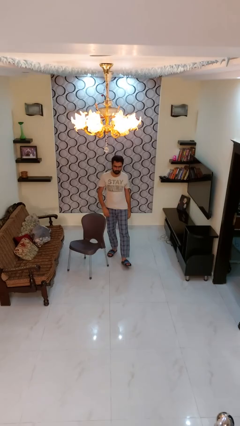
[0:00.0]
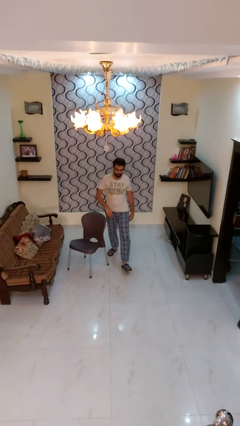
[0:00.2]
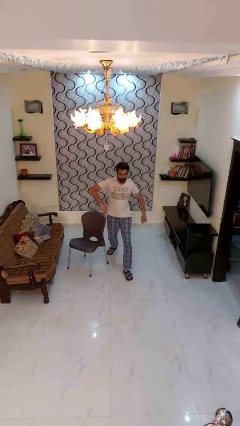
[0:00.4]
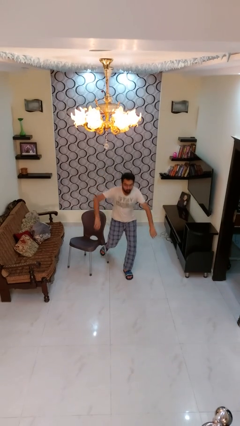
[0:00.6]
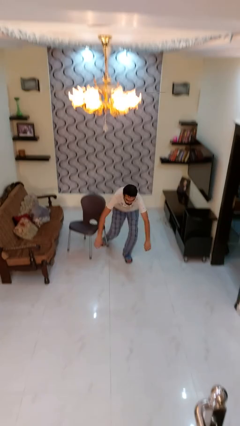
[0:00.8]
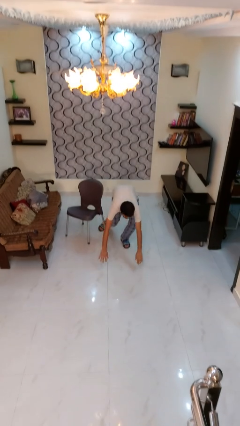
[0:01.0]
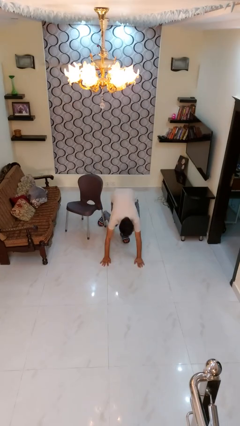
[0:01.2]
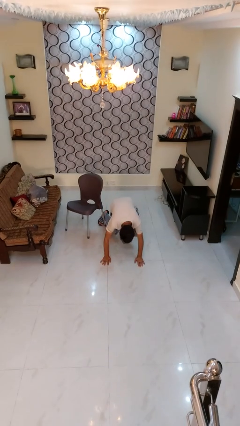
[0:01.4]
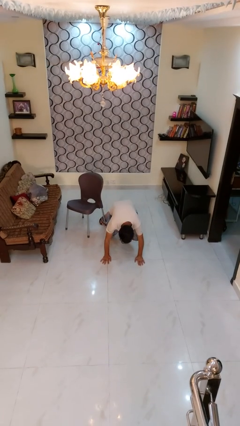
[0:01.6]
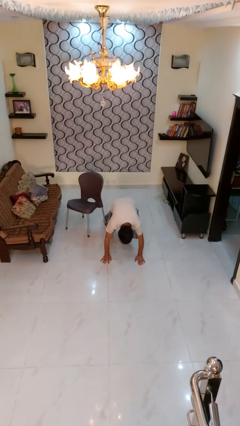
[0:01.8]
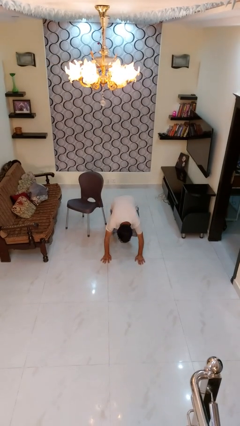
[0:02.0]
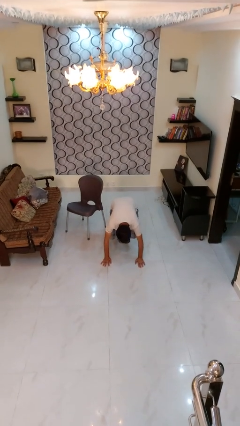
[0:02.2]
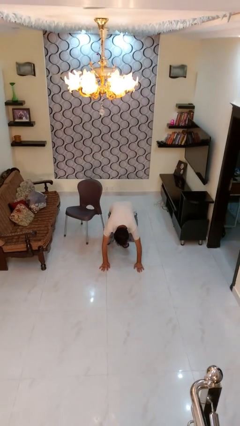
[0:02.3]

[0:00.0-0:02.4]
person trips on object on floor

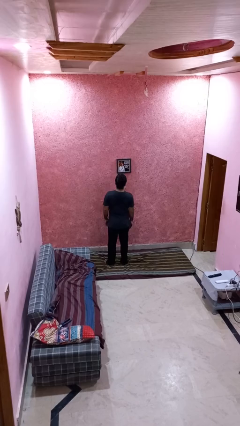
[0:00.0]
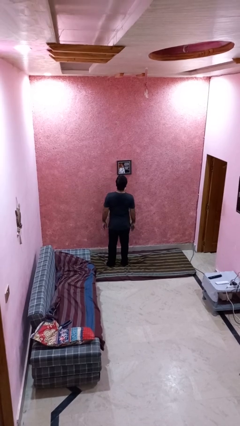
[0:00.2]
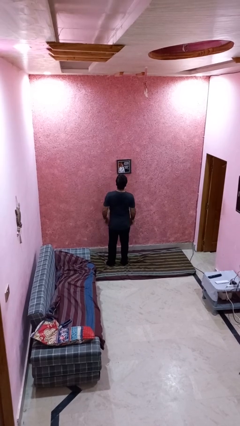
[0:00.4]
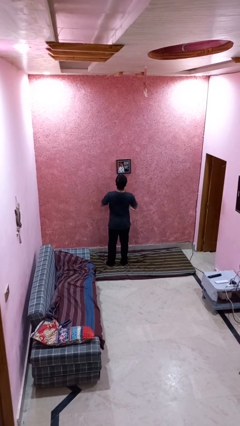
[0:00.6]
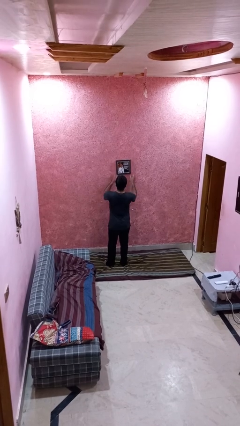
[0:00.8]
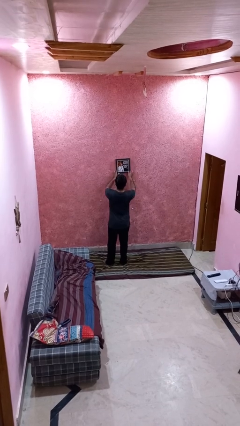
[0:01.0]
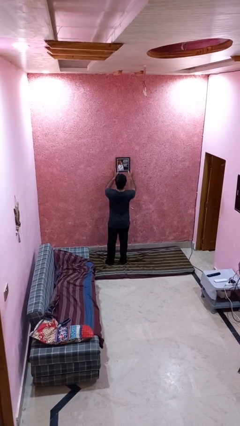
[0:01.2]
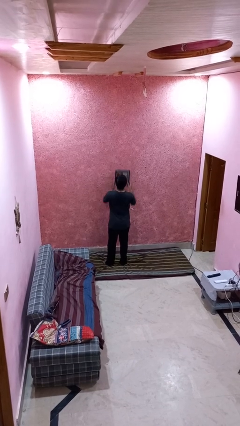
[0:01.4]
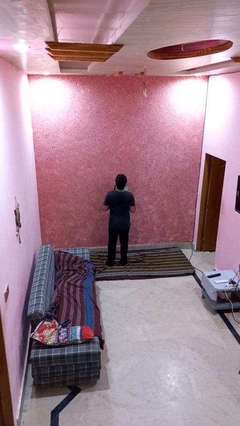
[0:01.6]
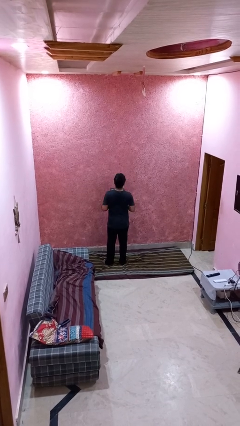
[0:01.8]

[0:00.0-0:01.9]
person takes down picture frame

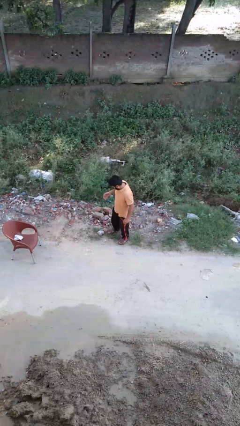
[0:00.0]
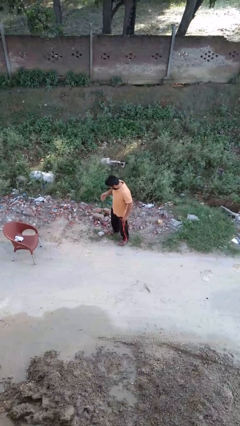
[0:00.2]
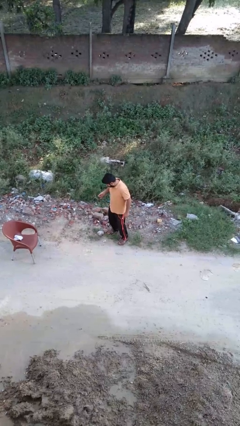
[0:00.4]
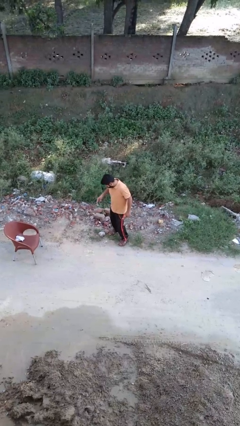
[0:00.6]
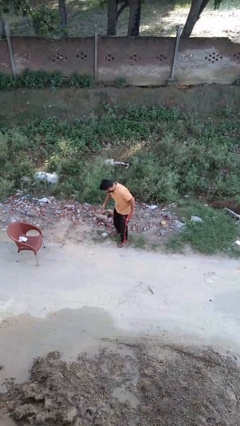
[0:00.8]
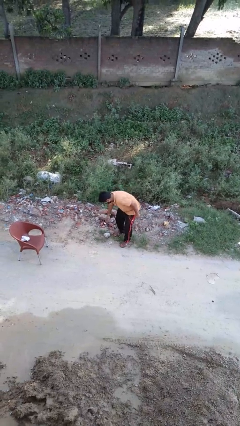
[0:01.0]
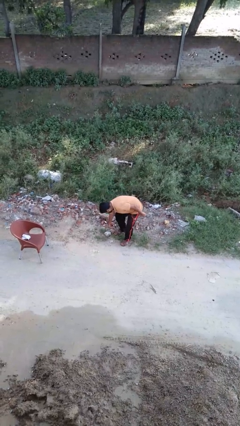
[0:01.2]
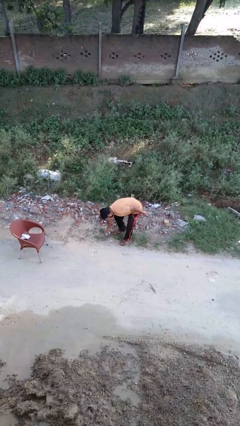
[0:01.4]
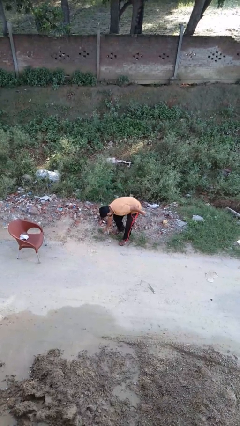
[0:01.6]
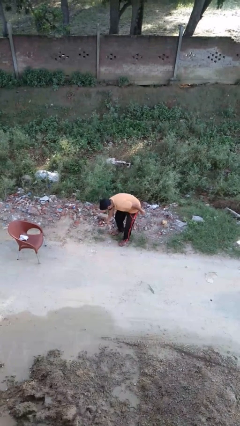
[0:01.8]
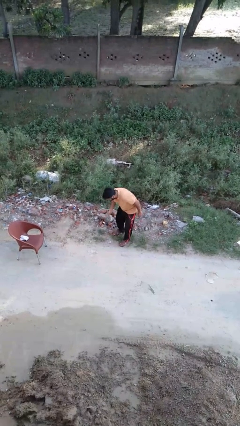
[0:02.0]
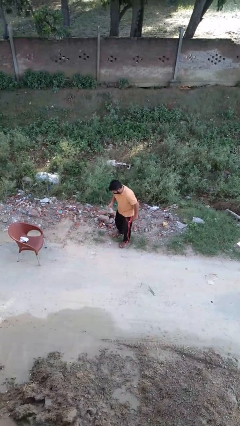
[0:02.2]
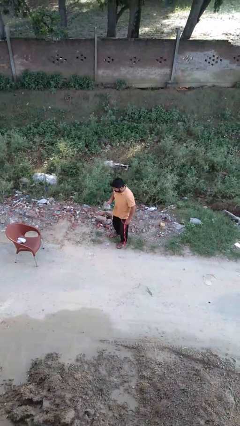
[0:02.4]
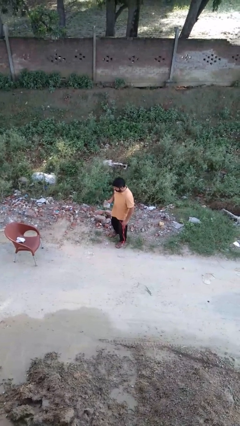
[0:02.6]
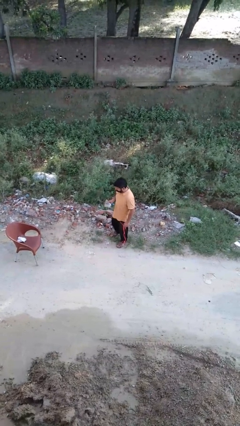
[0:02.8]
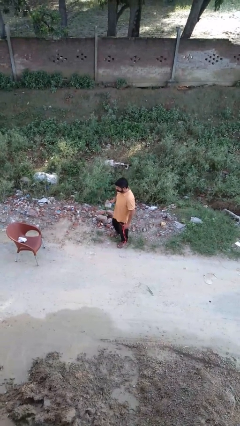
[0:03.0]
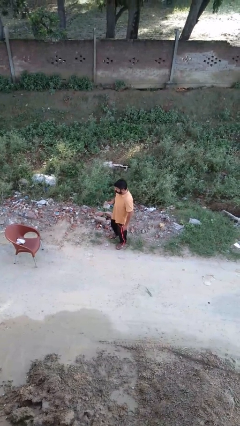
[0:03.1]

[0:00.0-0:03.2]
person picks up object from floor

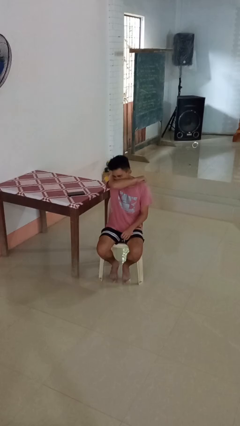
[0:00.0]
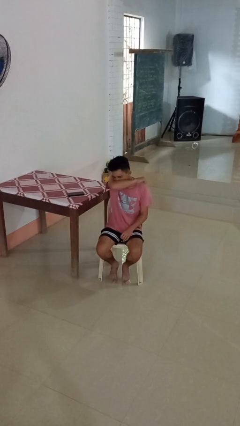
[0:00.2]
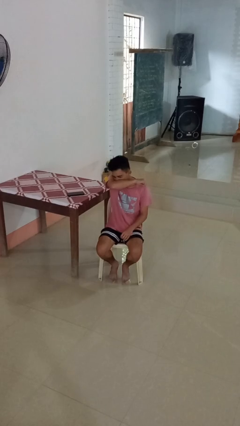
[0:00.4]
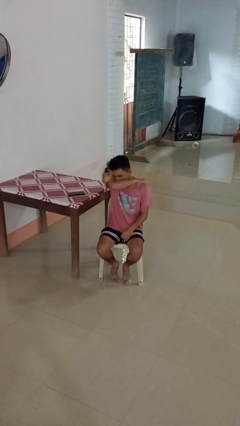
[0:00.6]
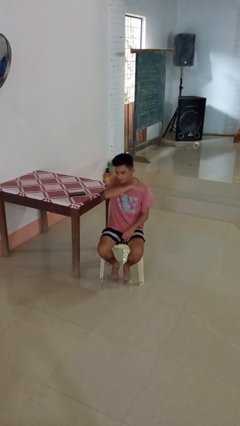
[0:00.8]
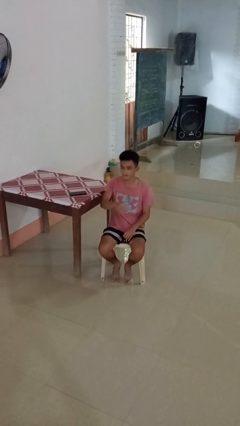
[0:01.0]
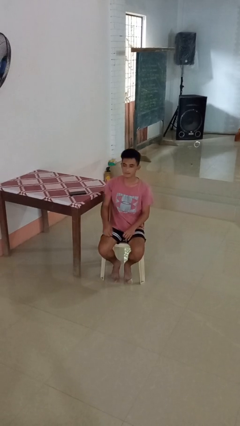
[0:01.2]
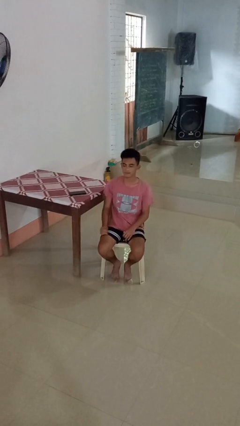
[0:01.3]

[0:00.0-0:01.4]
person sneezes into arm

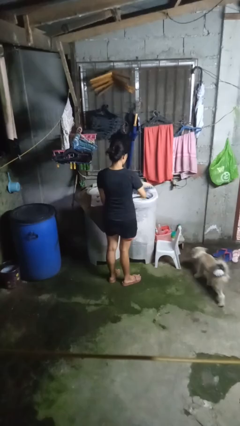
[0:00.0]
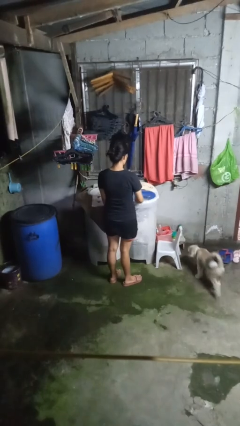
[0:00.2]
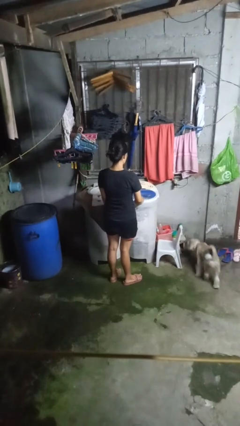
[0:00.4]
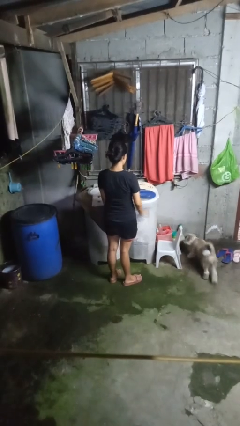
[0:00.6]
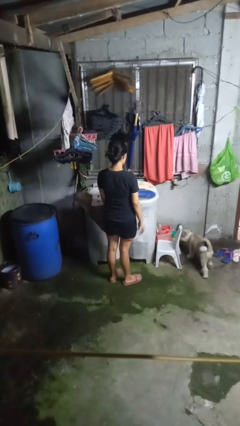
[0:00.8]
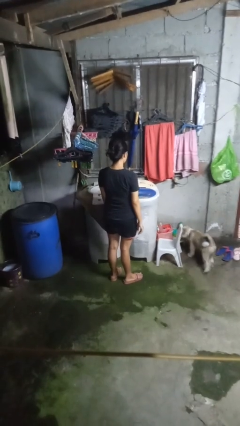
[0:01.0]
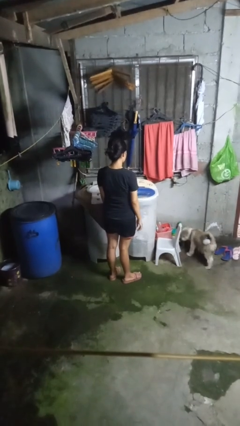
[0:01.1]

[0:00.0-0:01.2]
person closes clothes washer

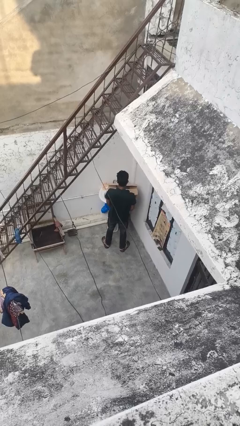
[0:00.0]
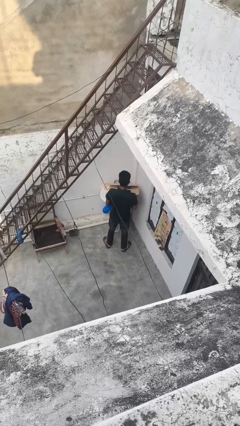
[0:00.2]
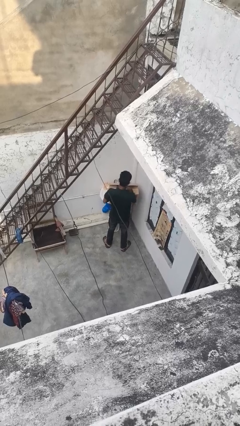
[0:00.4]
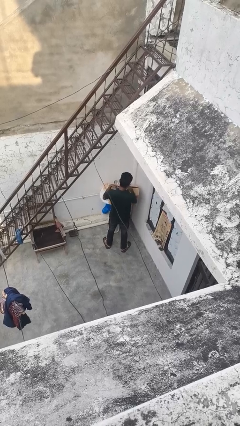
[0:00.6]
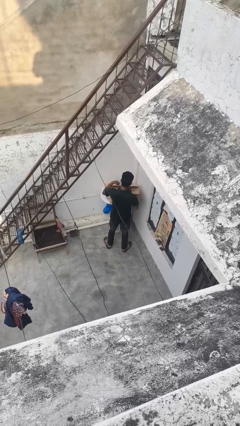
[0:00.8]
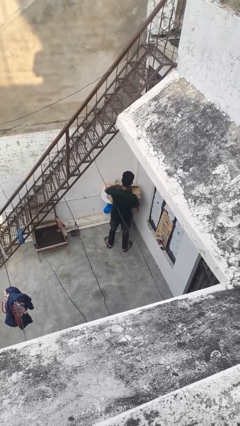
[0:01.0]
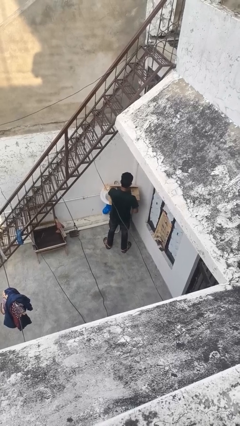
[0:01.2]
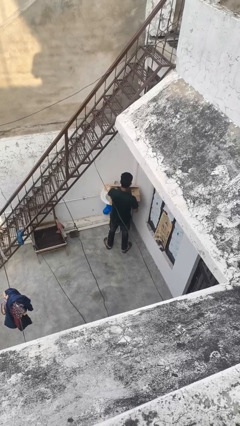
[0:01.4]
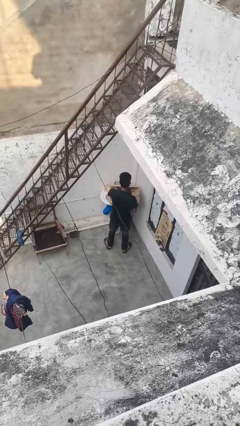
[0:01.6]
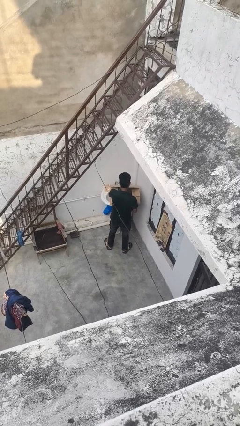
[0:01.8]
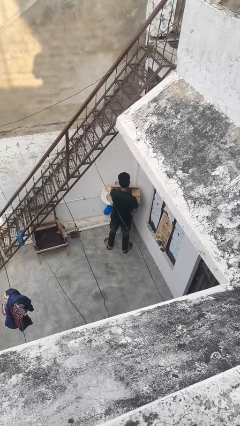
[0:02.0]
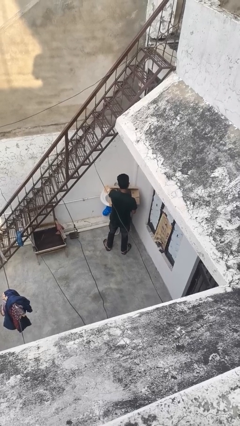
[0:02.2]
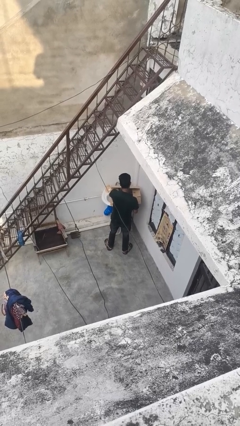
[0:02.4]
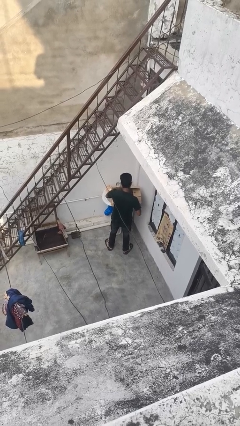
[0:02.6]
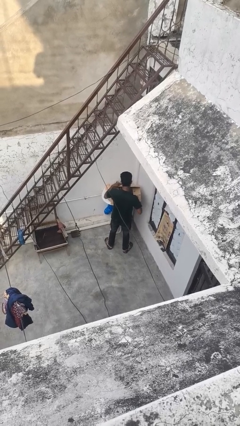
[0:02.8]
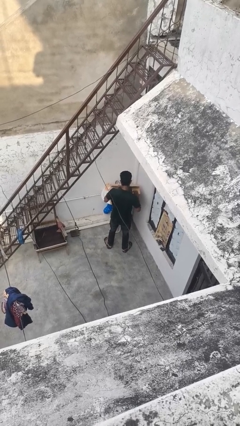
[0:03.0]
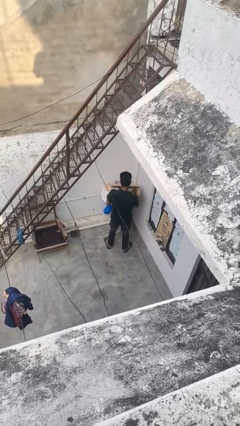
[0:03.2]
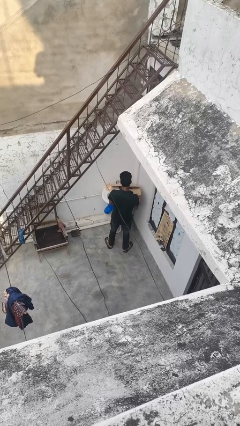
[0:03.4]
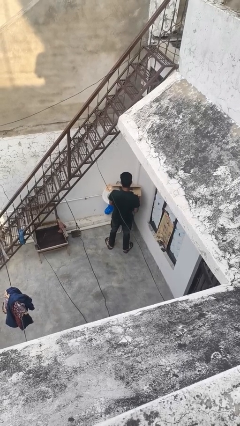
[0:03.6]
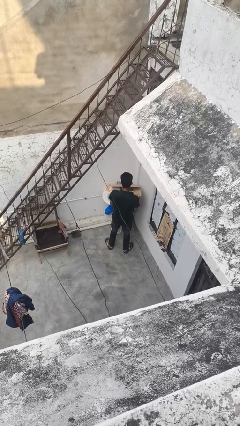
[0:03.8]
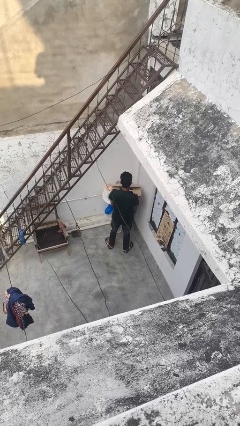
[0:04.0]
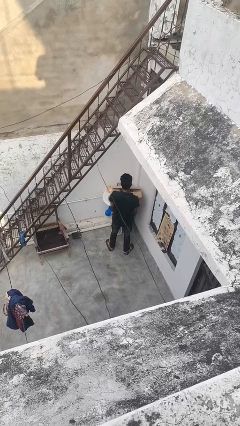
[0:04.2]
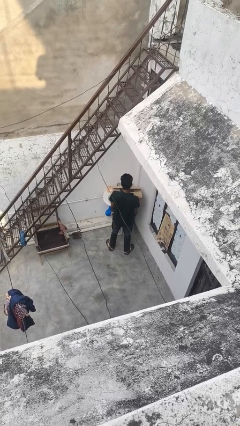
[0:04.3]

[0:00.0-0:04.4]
person searches in box

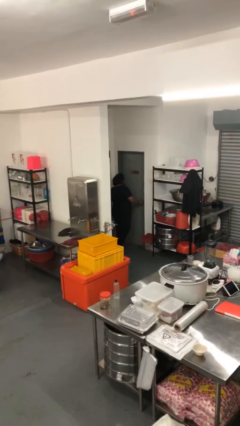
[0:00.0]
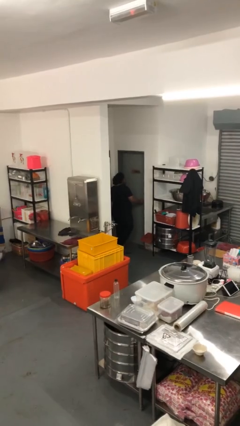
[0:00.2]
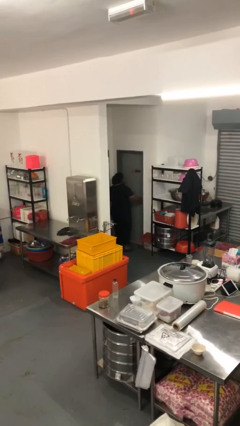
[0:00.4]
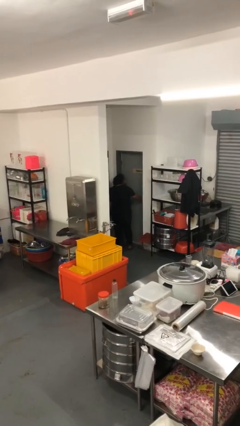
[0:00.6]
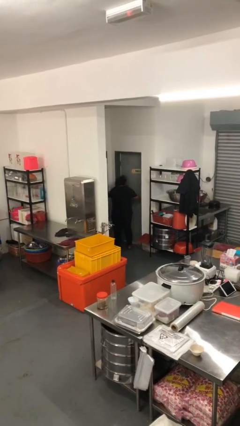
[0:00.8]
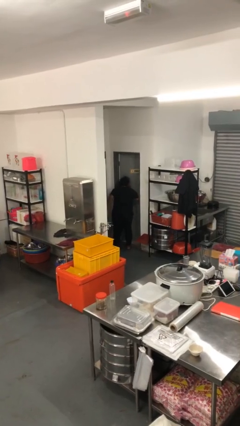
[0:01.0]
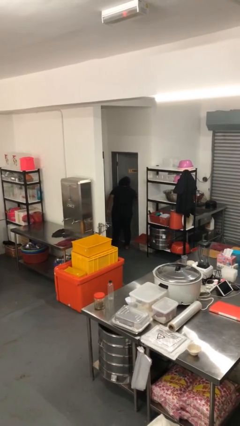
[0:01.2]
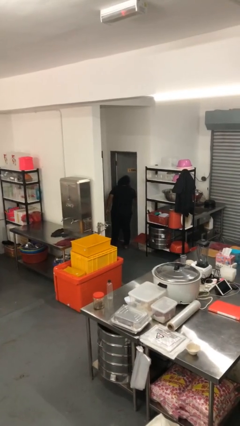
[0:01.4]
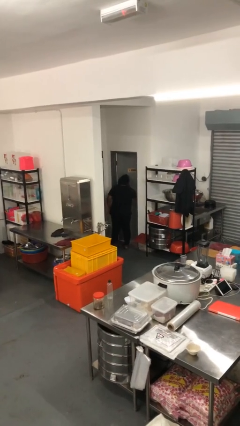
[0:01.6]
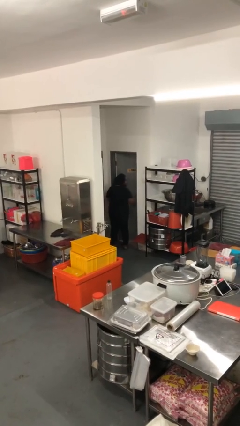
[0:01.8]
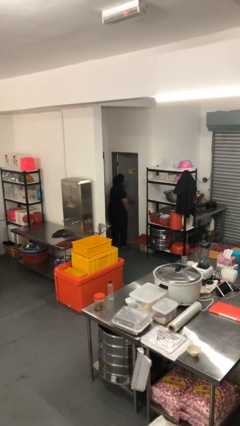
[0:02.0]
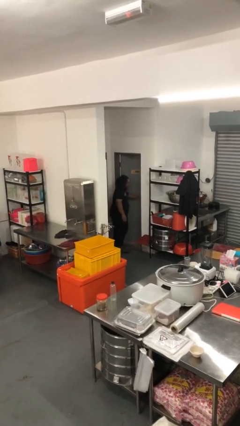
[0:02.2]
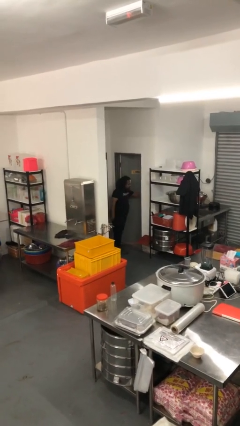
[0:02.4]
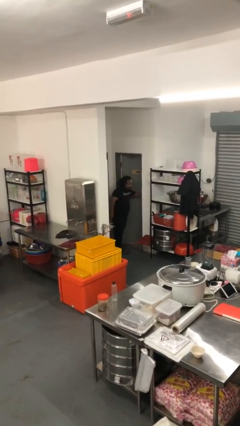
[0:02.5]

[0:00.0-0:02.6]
person opens facility door
